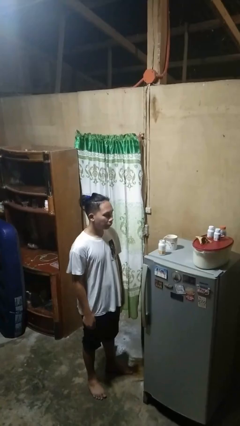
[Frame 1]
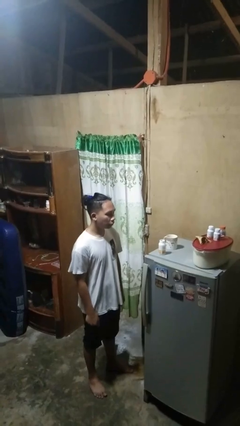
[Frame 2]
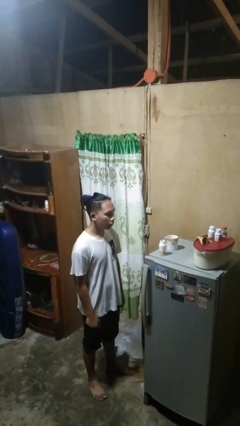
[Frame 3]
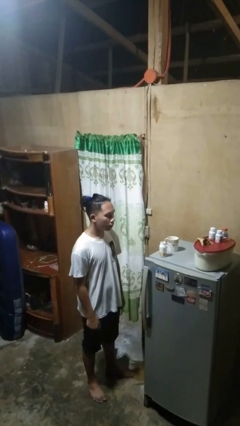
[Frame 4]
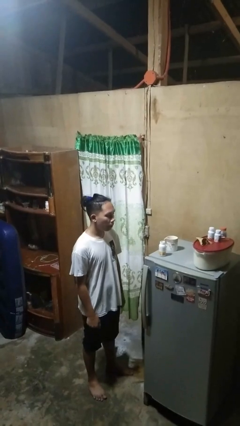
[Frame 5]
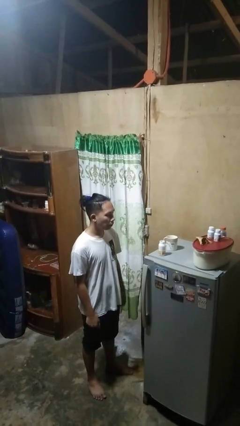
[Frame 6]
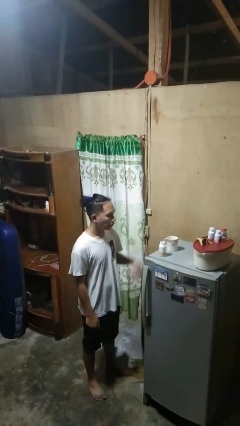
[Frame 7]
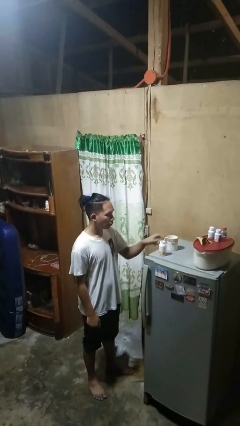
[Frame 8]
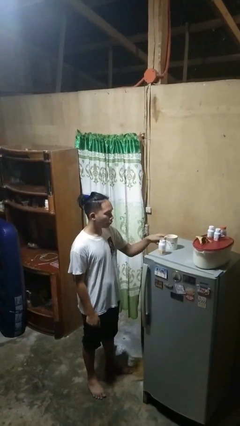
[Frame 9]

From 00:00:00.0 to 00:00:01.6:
person drinks from cup

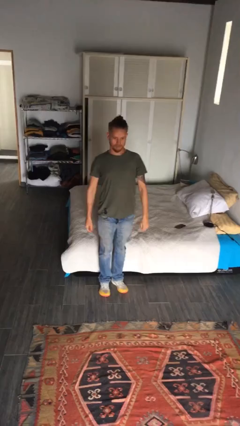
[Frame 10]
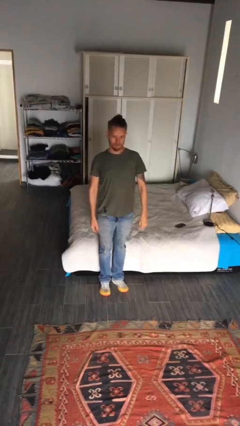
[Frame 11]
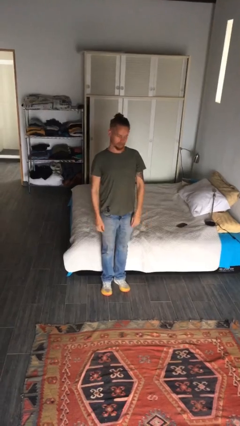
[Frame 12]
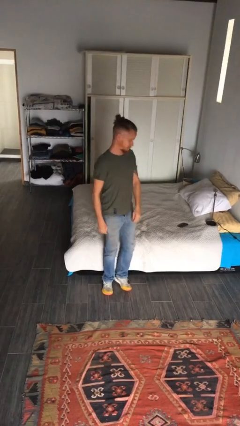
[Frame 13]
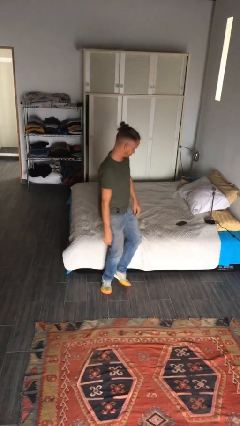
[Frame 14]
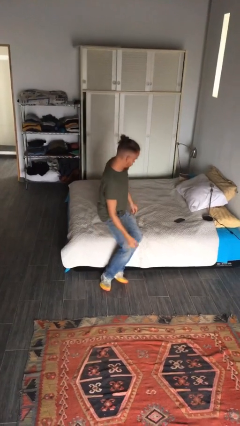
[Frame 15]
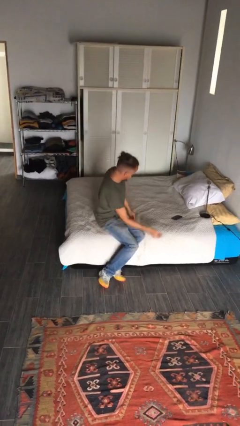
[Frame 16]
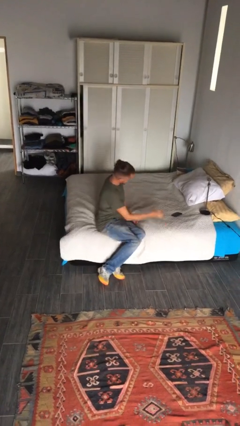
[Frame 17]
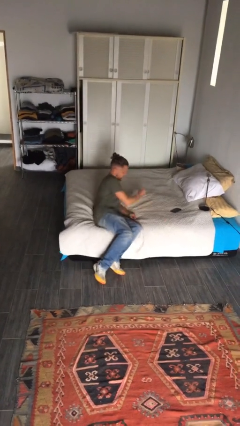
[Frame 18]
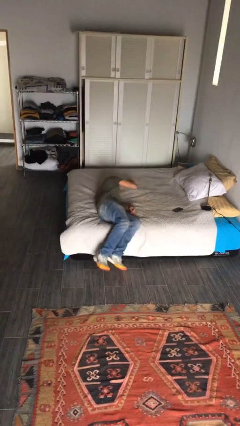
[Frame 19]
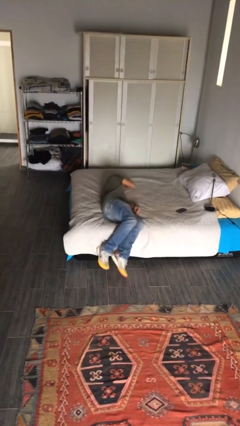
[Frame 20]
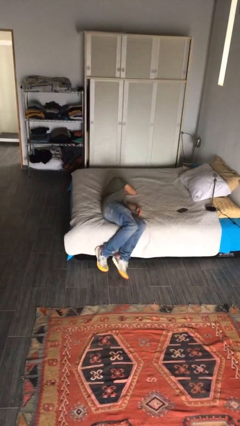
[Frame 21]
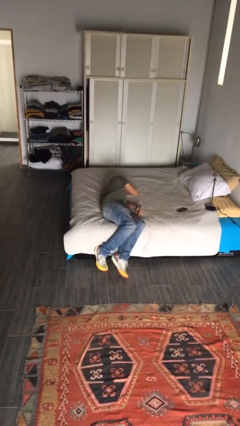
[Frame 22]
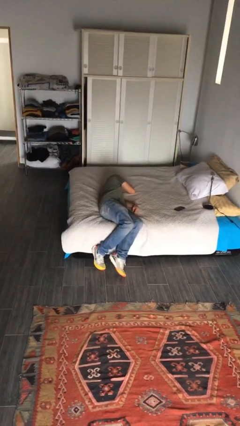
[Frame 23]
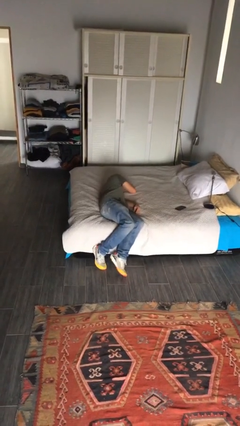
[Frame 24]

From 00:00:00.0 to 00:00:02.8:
person lies down on couch

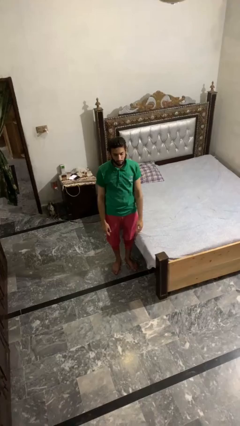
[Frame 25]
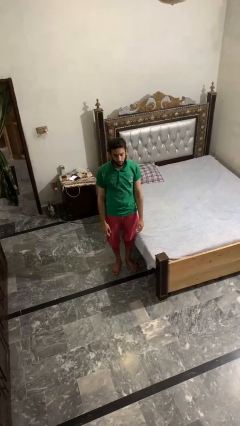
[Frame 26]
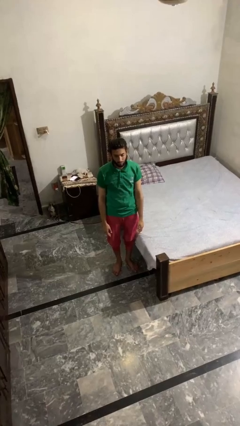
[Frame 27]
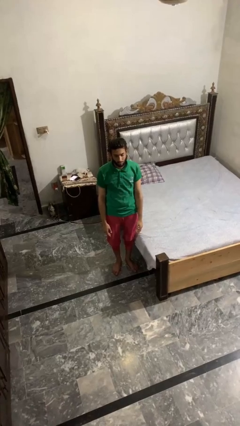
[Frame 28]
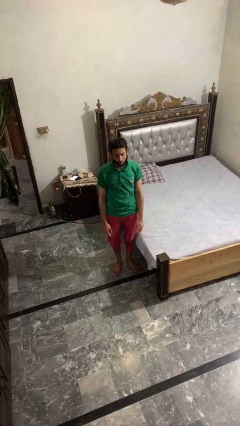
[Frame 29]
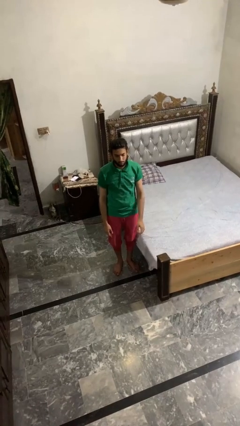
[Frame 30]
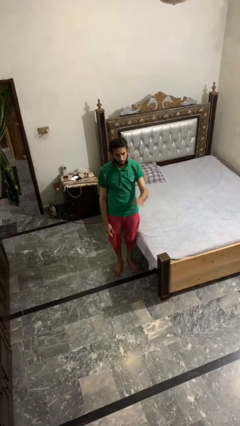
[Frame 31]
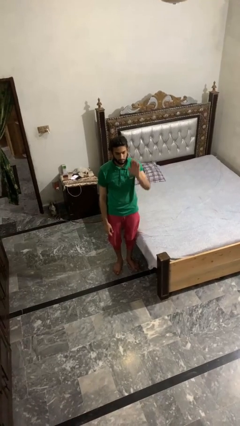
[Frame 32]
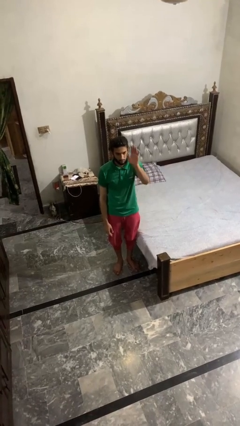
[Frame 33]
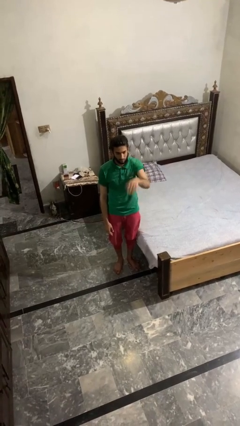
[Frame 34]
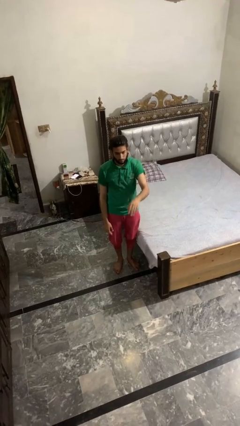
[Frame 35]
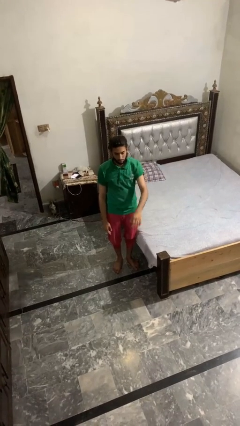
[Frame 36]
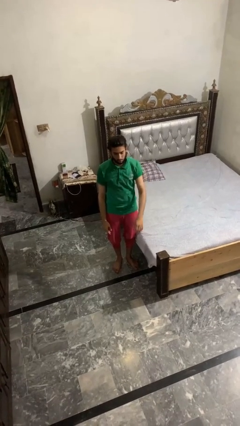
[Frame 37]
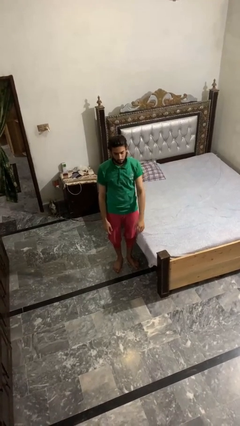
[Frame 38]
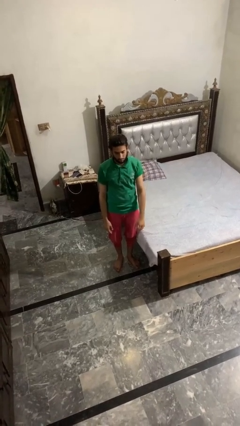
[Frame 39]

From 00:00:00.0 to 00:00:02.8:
person gestures swipe down

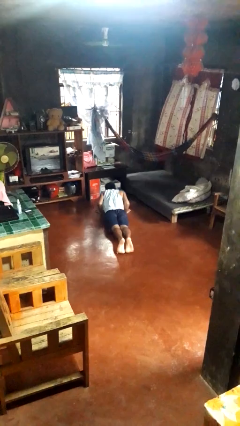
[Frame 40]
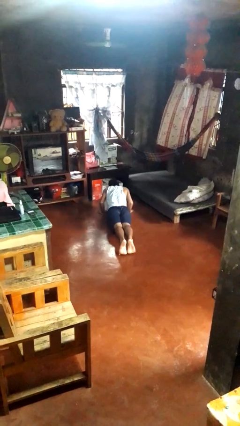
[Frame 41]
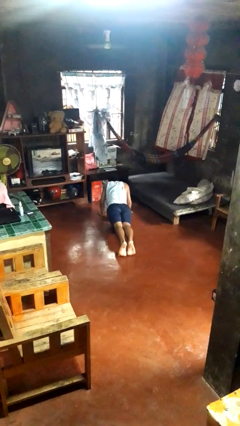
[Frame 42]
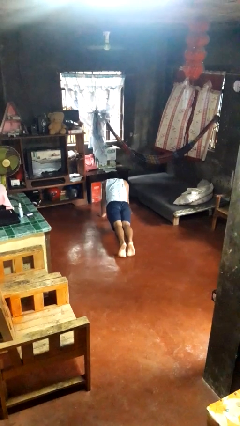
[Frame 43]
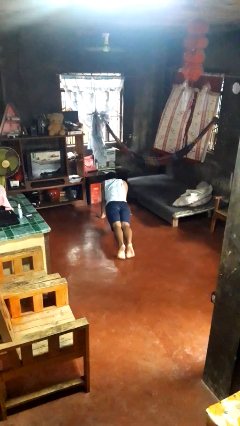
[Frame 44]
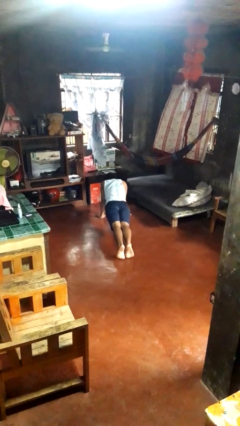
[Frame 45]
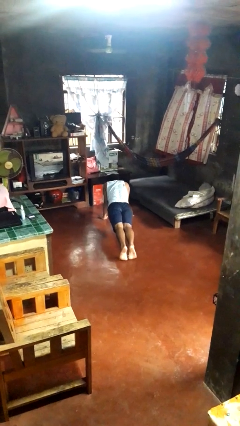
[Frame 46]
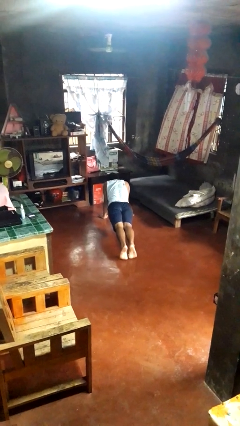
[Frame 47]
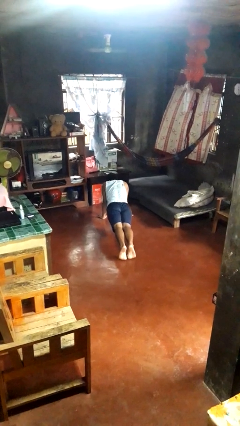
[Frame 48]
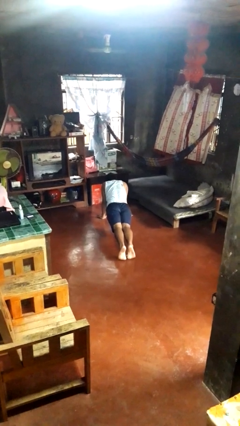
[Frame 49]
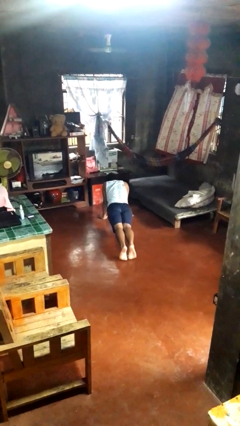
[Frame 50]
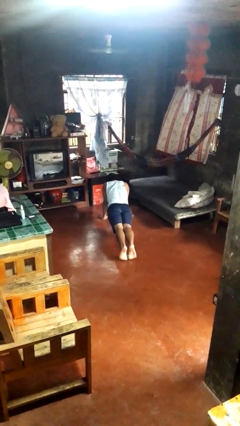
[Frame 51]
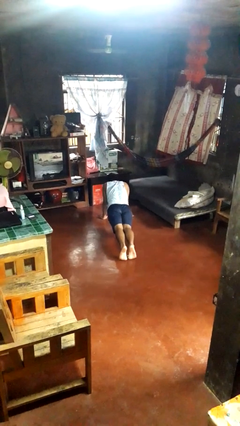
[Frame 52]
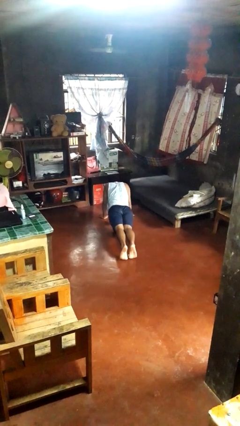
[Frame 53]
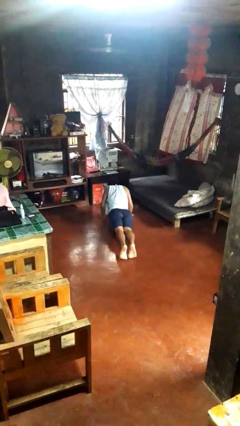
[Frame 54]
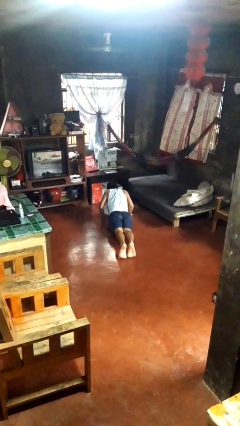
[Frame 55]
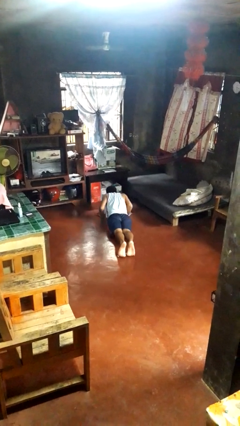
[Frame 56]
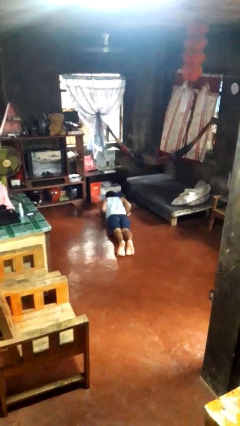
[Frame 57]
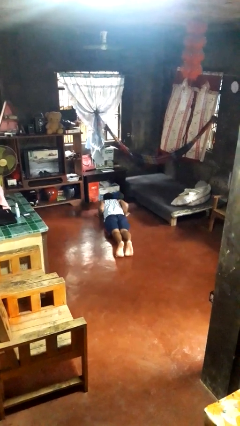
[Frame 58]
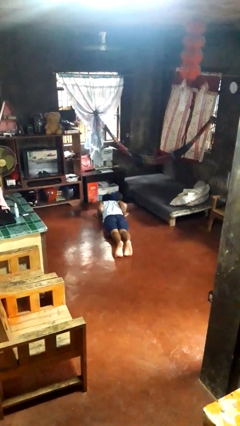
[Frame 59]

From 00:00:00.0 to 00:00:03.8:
person exercises with pushup

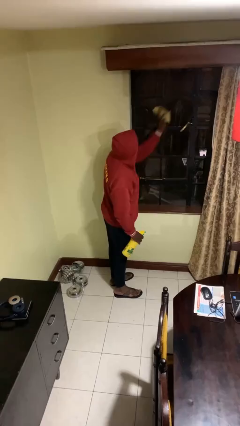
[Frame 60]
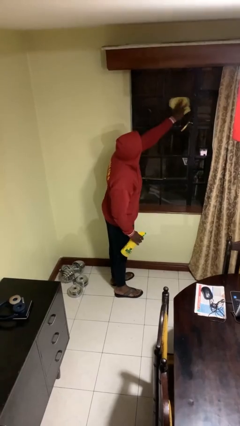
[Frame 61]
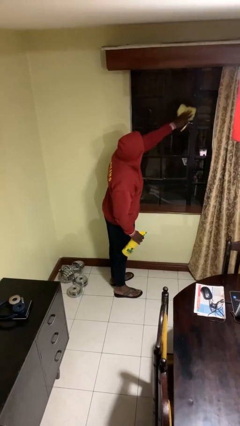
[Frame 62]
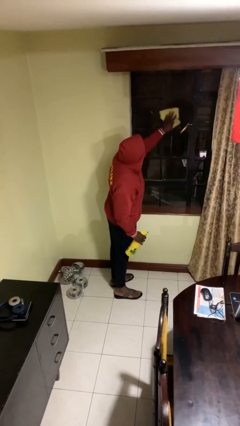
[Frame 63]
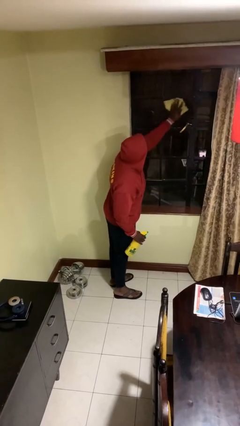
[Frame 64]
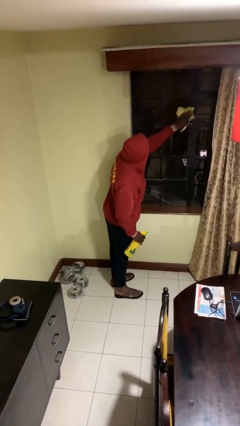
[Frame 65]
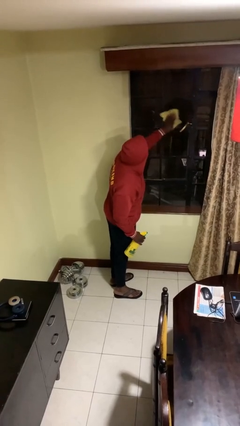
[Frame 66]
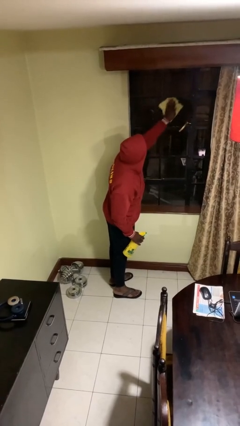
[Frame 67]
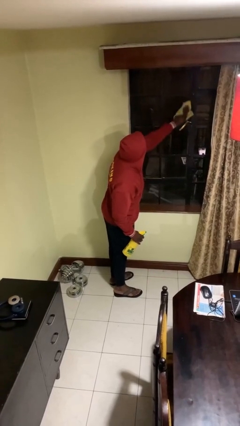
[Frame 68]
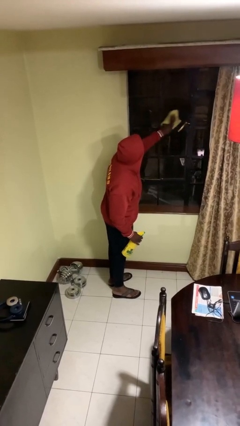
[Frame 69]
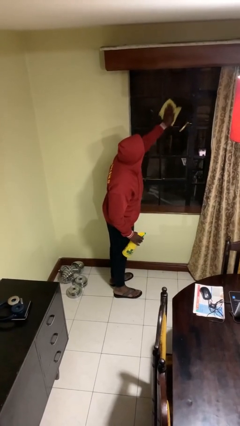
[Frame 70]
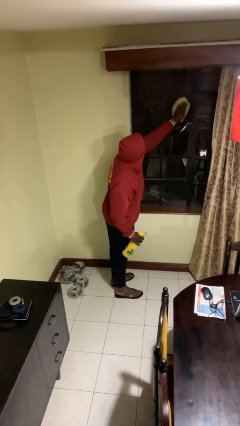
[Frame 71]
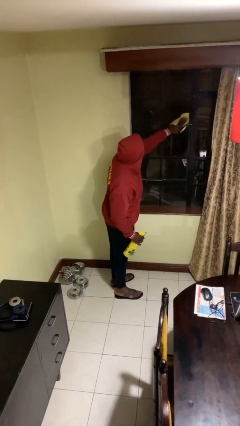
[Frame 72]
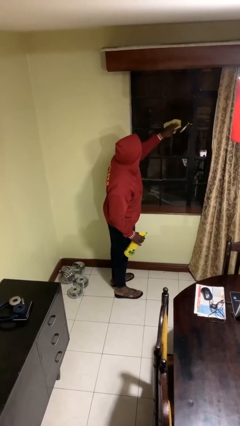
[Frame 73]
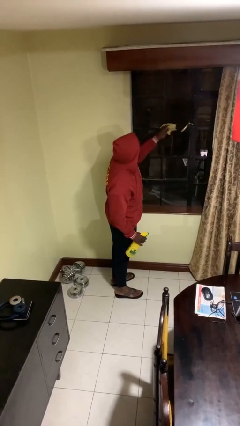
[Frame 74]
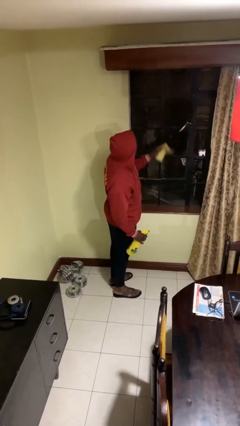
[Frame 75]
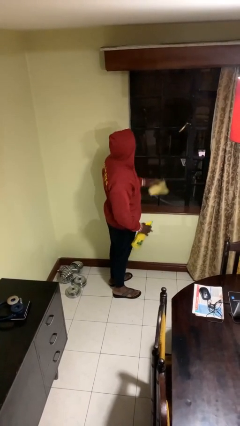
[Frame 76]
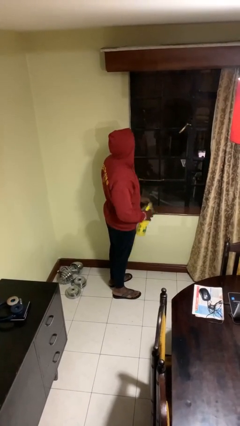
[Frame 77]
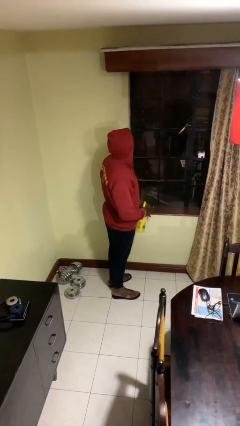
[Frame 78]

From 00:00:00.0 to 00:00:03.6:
person washes window

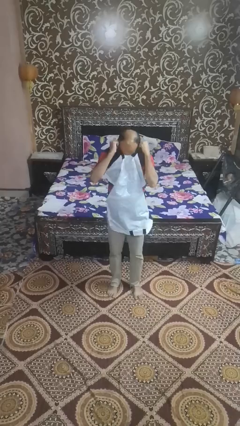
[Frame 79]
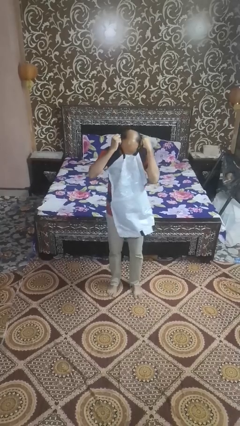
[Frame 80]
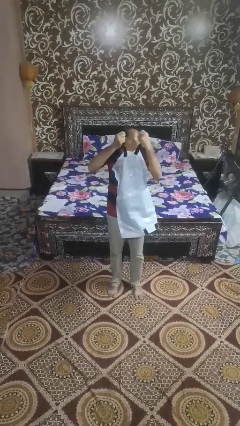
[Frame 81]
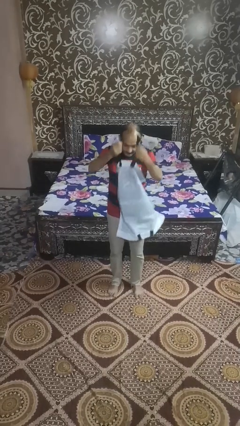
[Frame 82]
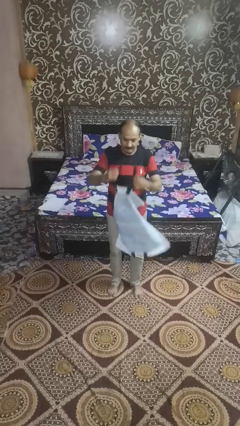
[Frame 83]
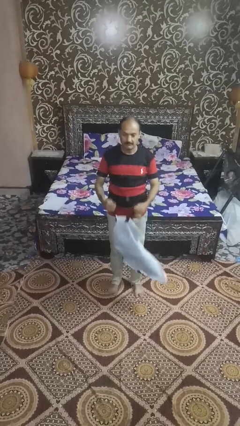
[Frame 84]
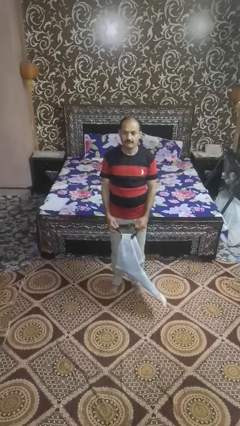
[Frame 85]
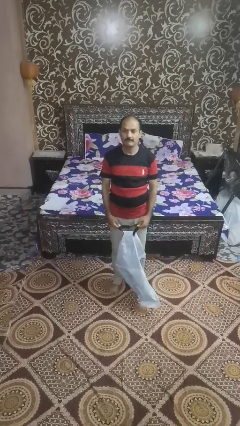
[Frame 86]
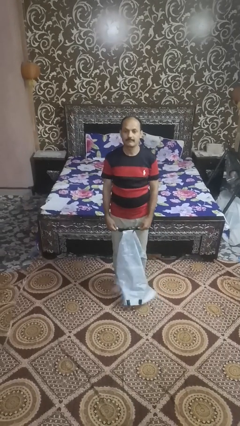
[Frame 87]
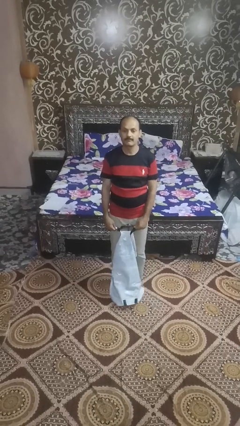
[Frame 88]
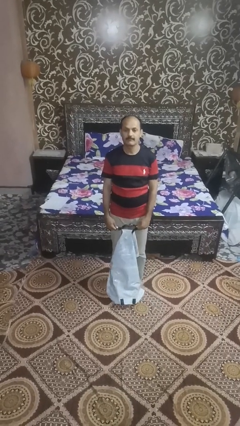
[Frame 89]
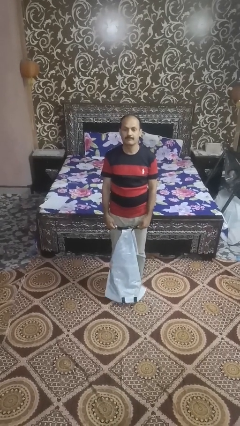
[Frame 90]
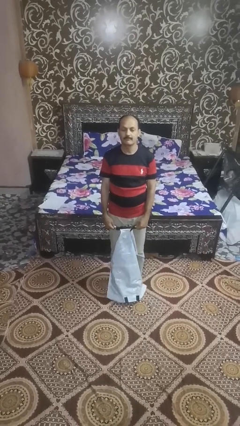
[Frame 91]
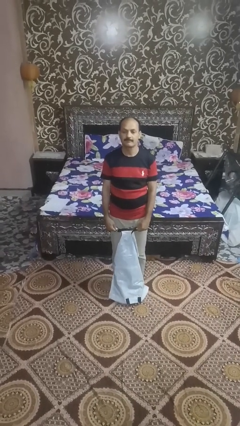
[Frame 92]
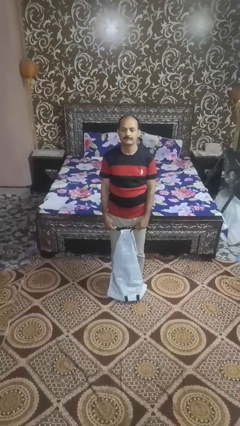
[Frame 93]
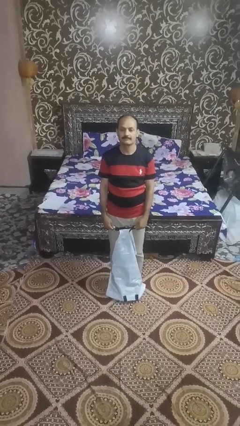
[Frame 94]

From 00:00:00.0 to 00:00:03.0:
person tears paper
